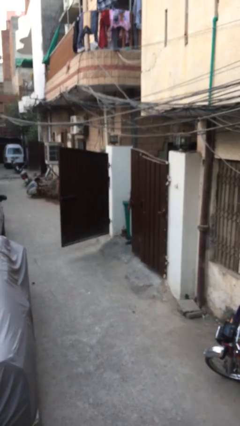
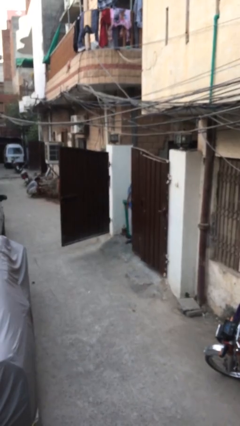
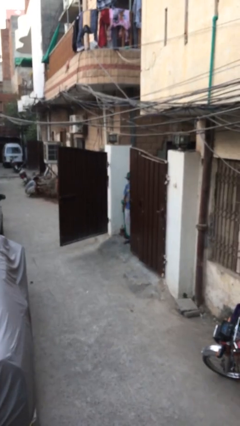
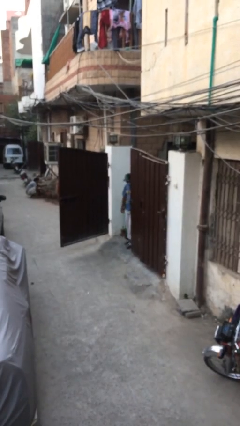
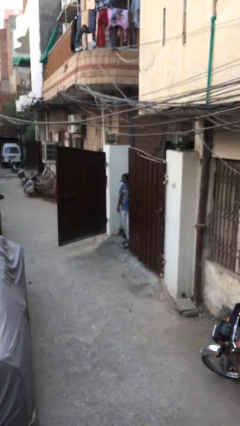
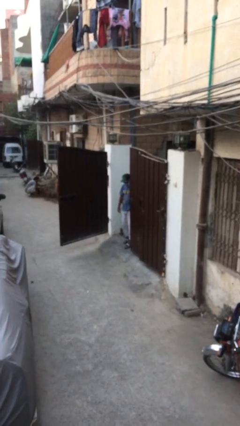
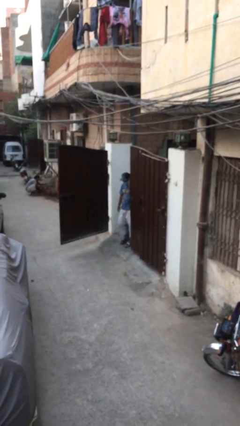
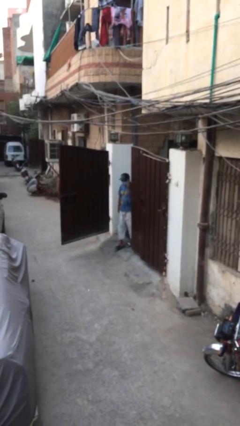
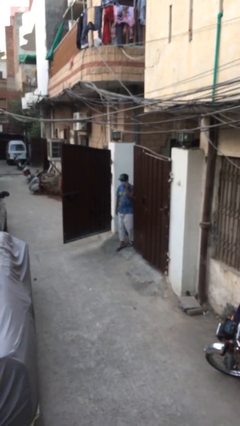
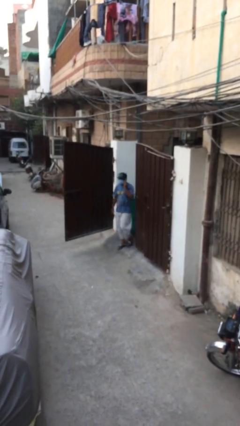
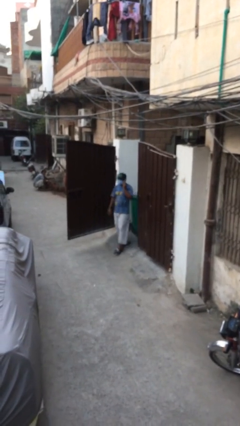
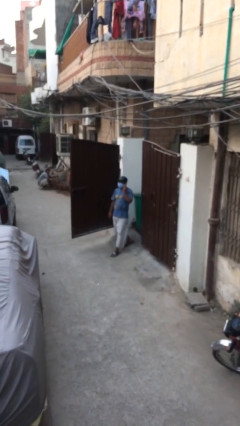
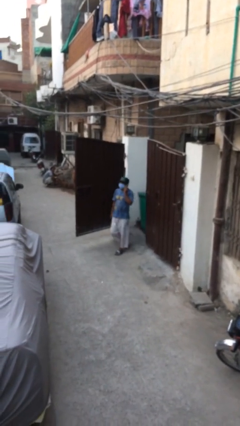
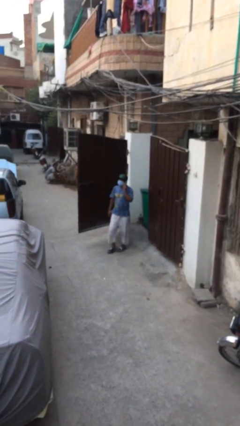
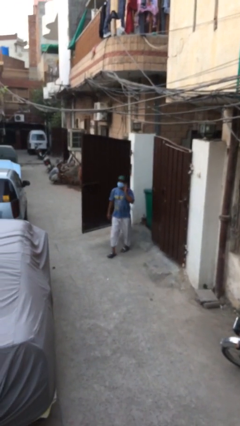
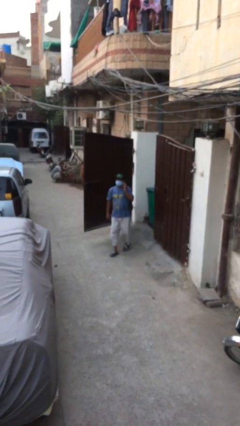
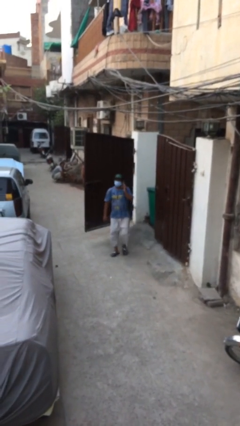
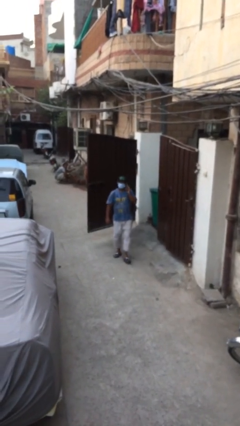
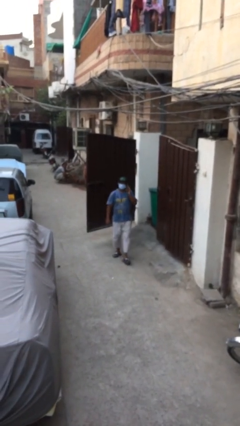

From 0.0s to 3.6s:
person enters scene through structure

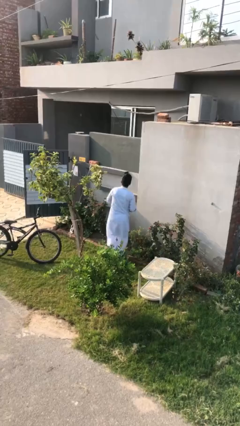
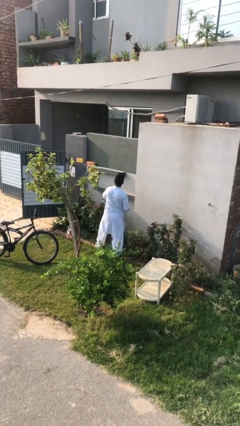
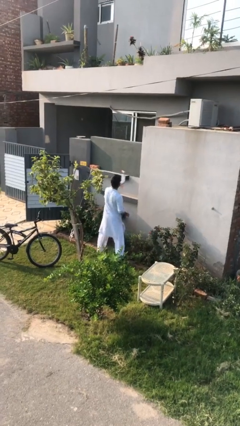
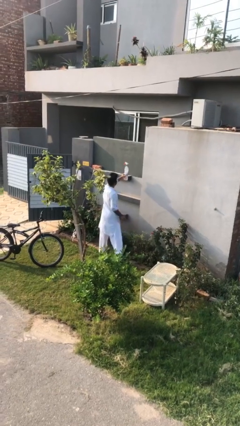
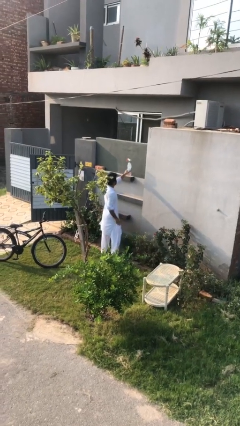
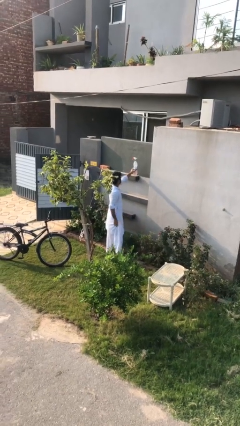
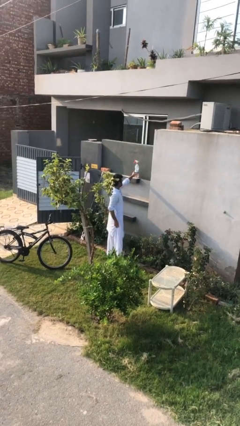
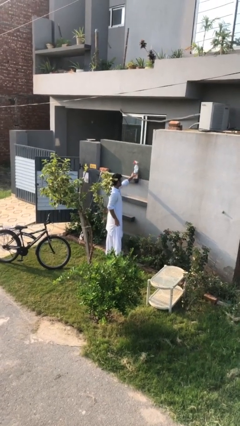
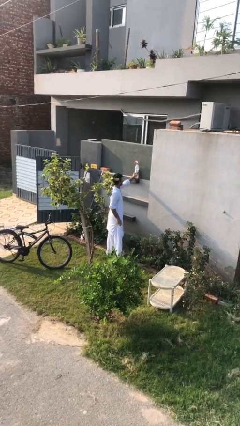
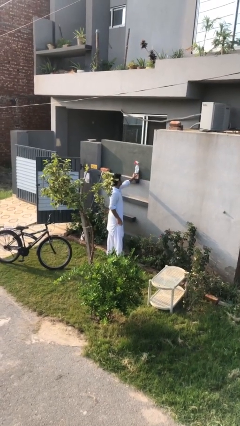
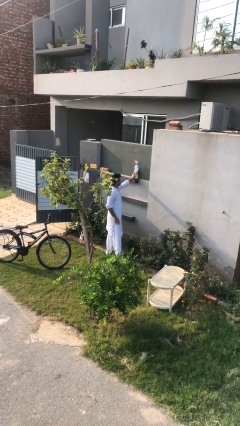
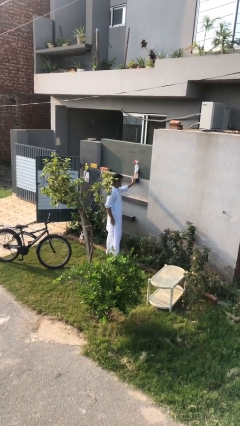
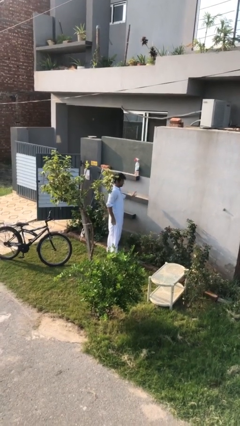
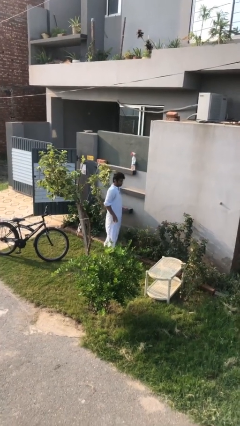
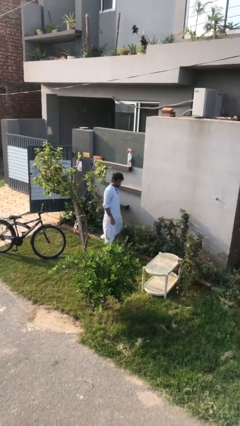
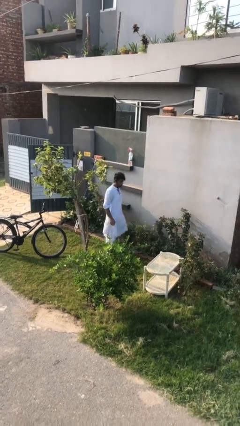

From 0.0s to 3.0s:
person puts down object on shelf

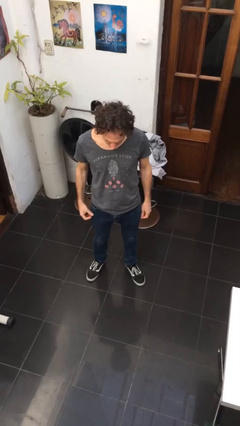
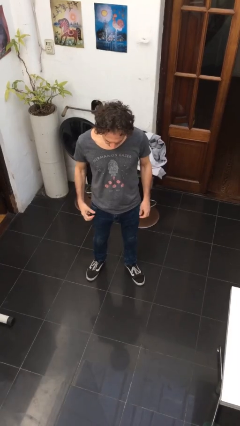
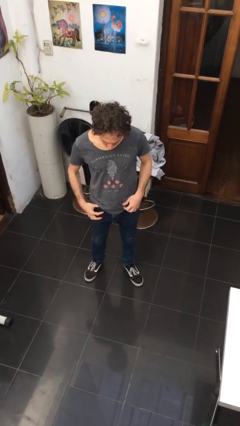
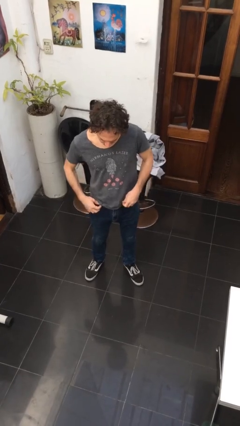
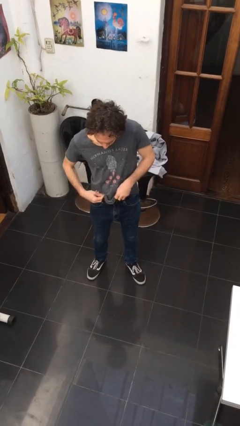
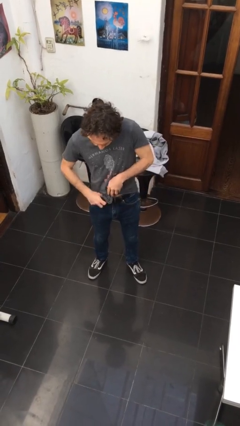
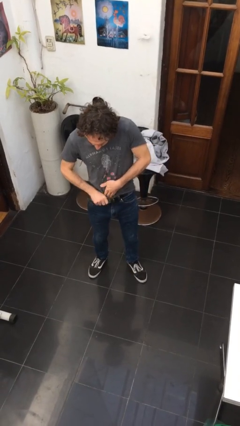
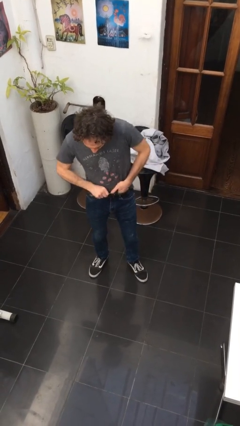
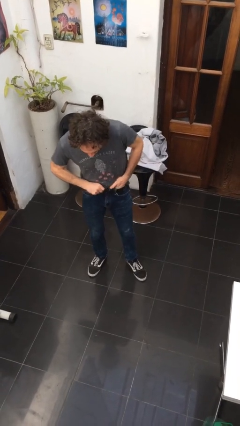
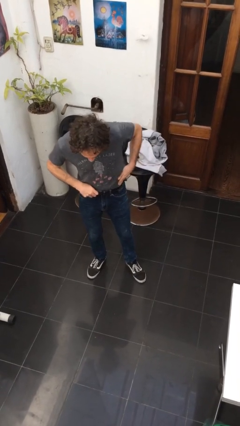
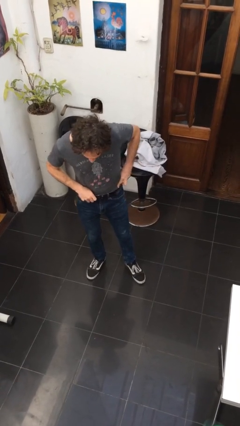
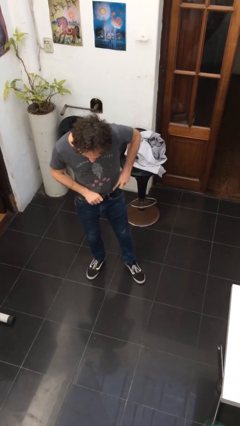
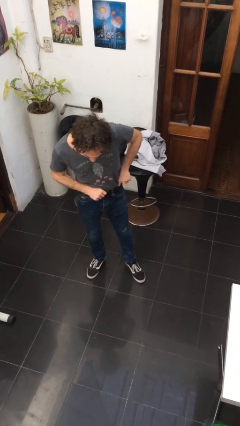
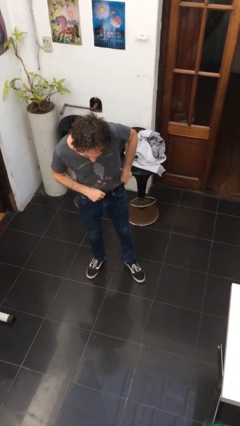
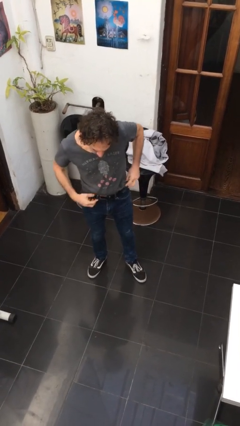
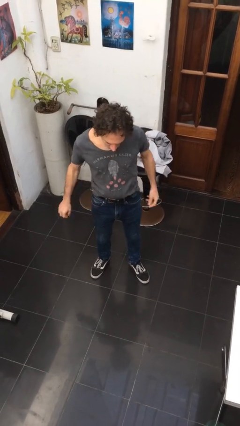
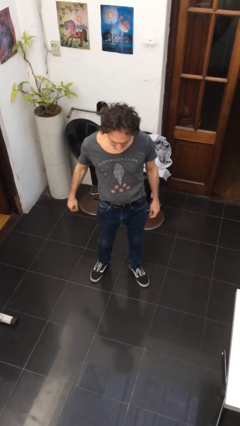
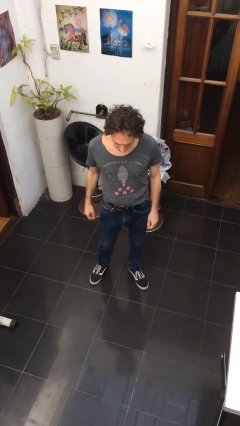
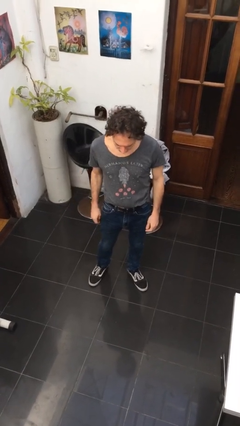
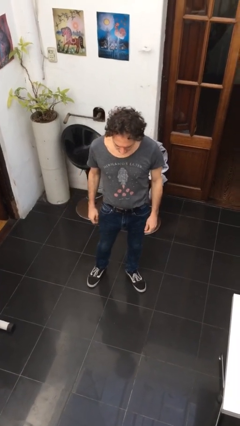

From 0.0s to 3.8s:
person tucks in shirt

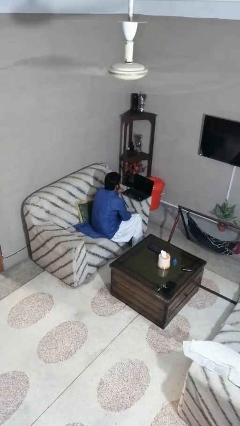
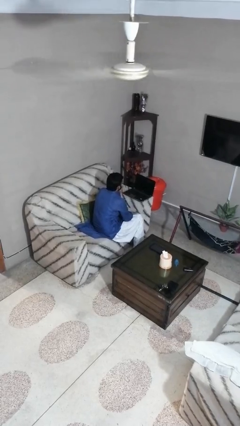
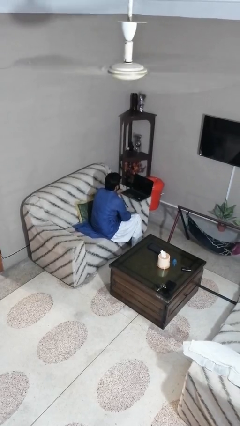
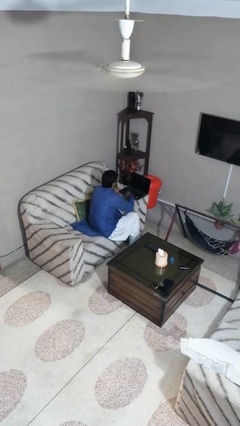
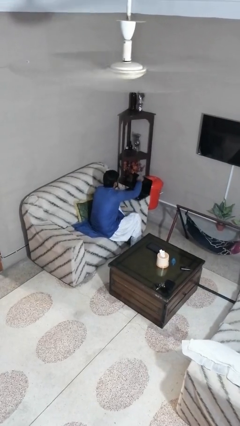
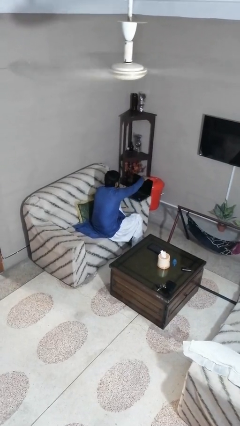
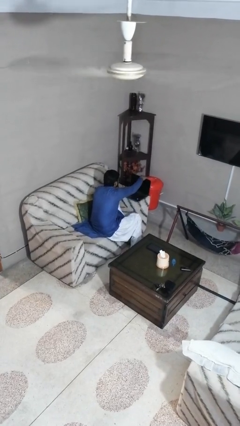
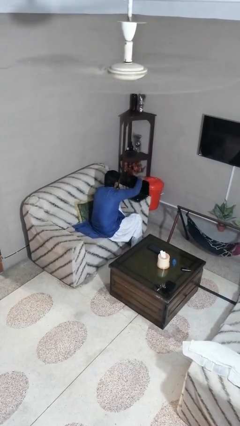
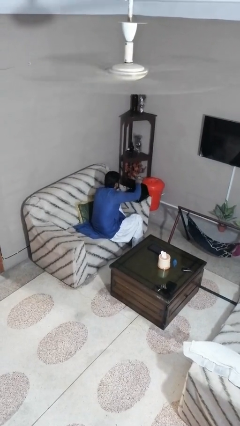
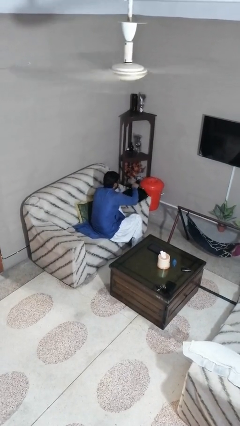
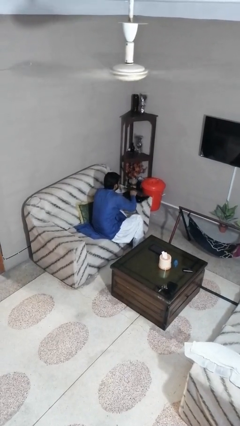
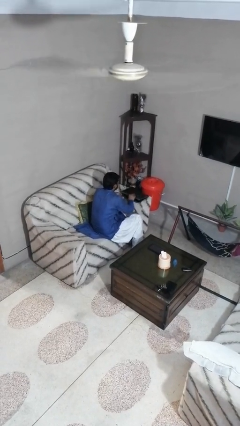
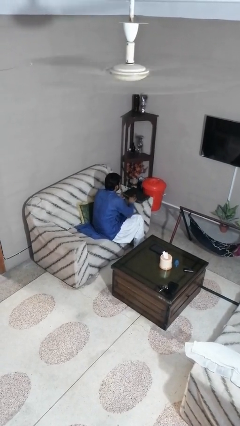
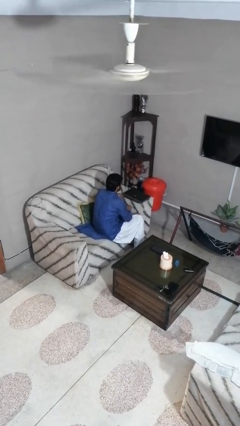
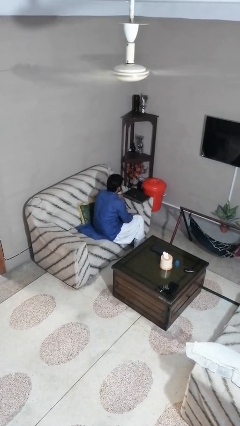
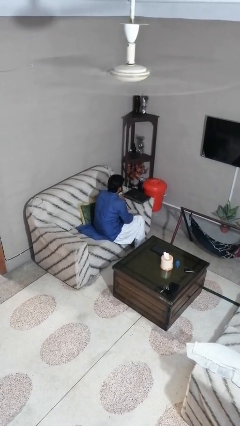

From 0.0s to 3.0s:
person closes laptop

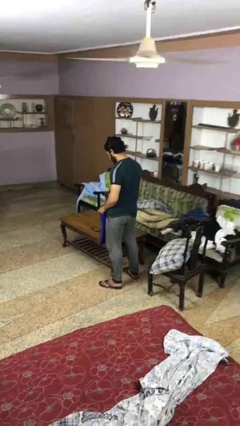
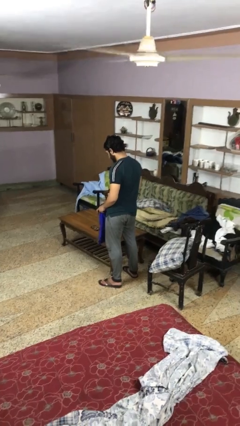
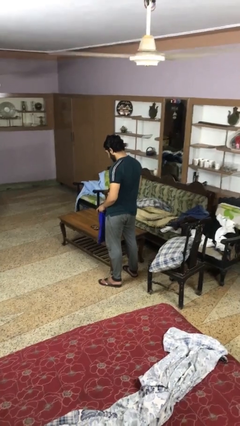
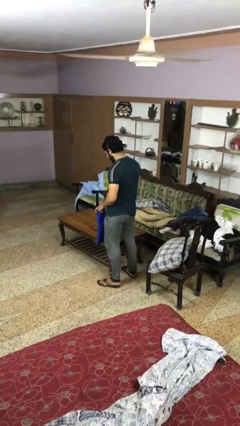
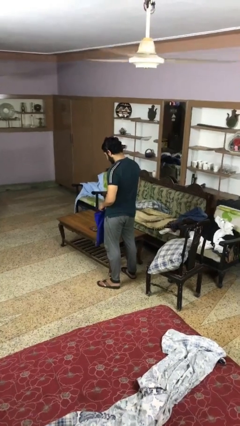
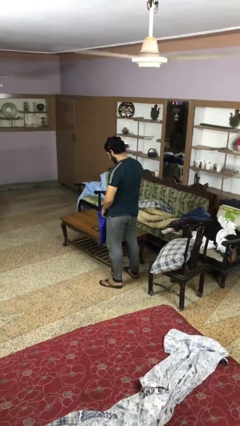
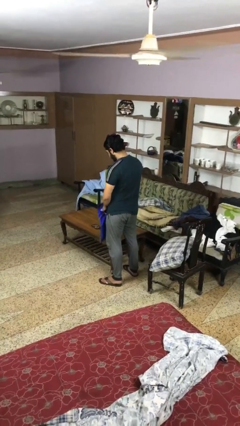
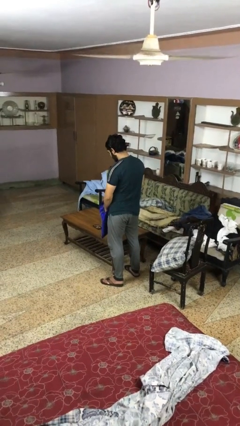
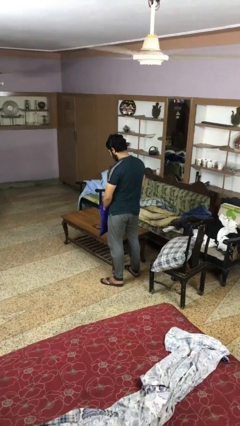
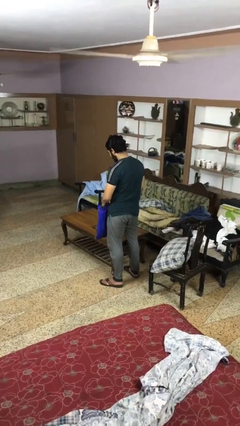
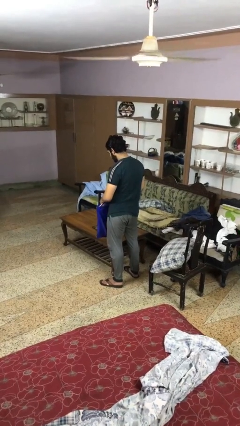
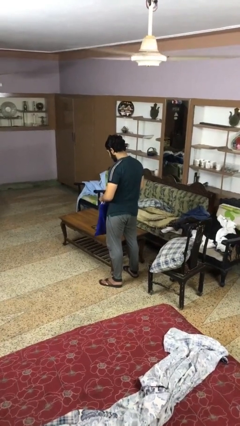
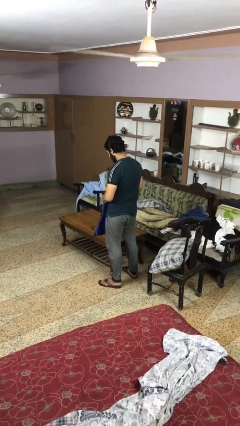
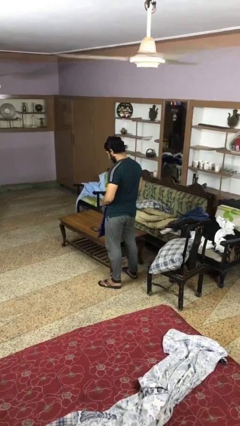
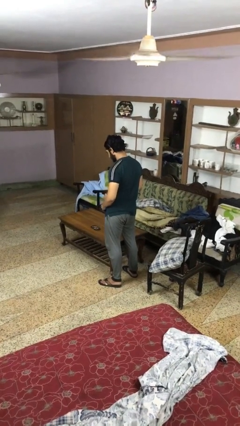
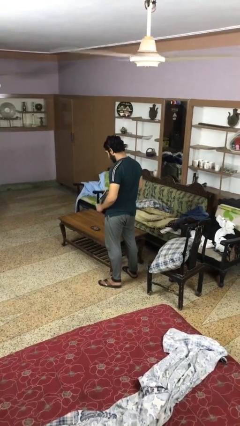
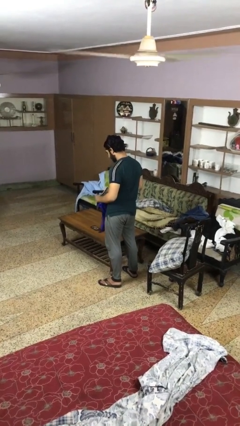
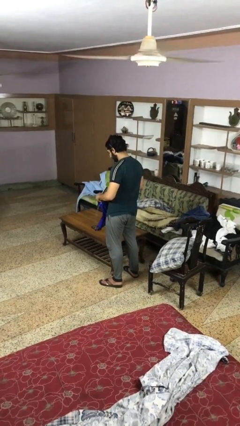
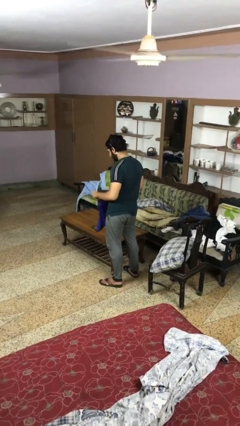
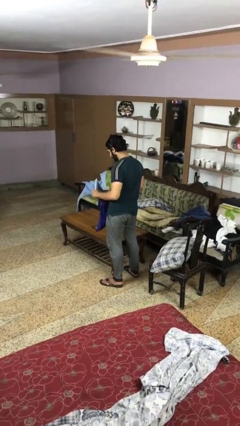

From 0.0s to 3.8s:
person takes object from bag

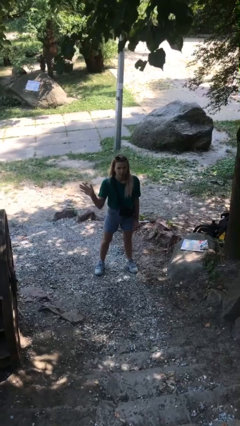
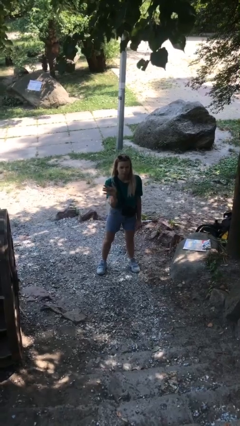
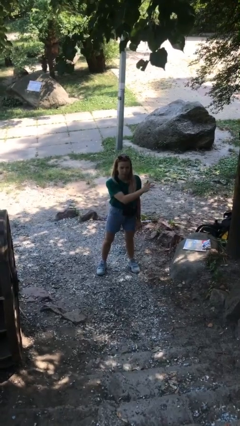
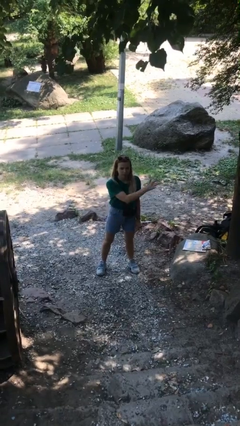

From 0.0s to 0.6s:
person gestures swipe left
